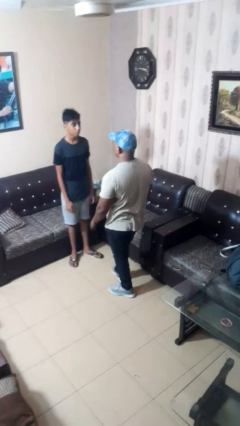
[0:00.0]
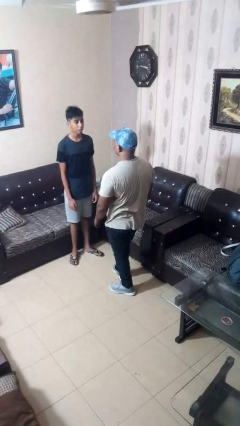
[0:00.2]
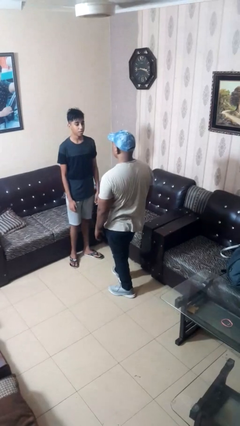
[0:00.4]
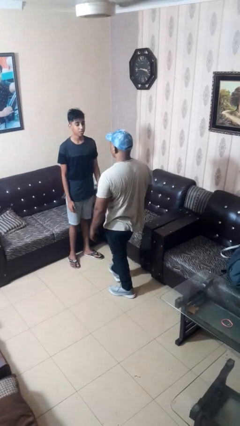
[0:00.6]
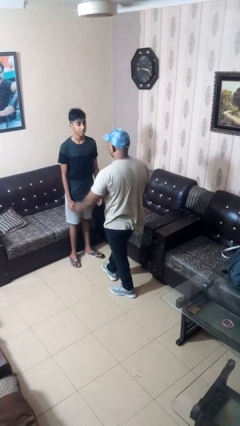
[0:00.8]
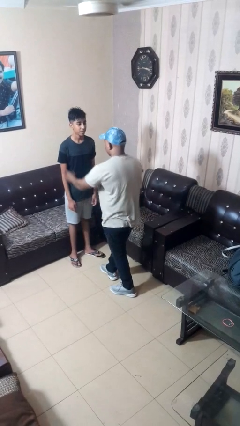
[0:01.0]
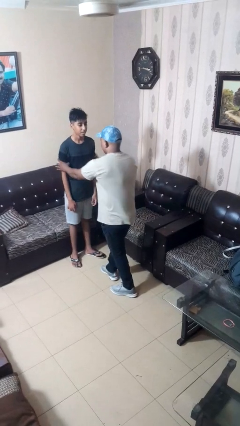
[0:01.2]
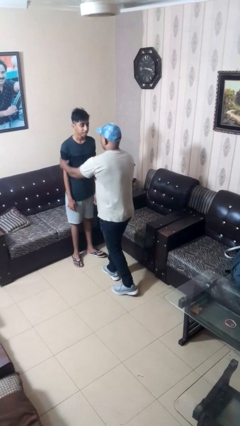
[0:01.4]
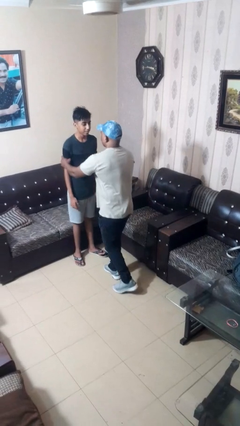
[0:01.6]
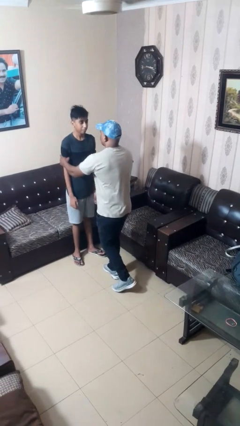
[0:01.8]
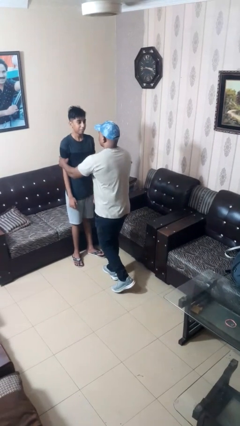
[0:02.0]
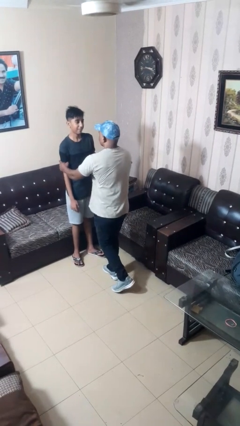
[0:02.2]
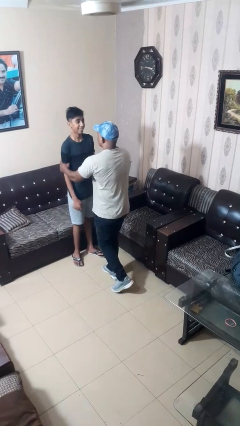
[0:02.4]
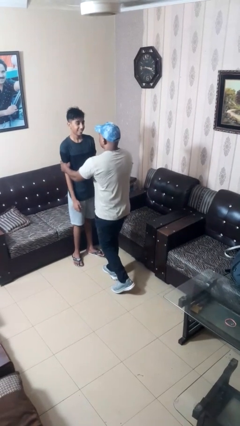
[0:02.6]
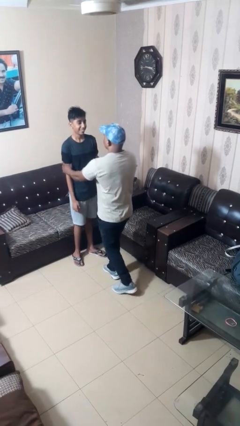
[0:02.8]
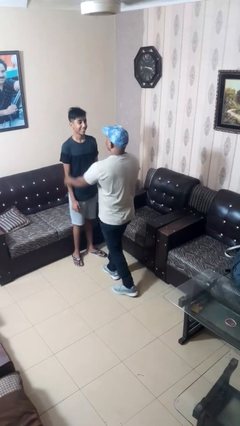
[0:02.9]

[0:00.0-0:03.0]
person grabs person by bicep

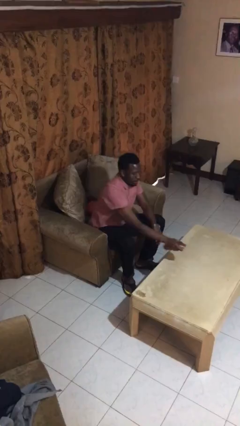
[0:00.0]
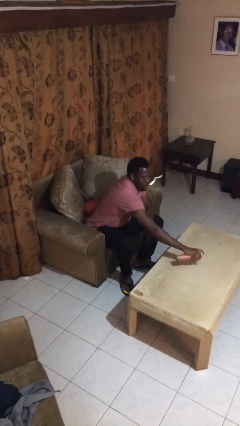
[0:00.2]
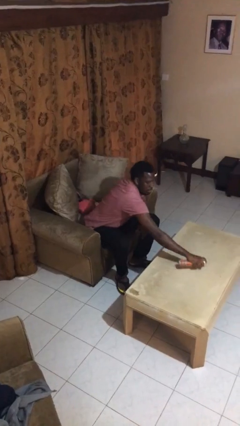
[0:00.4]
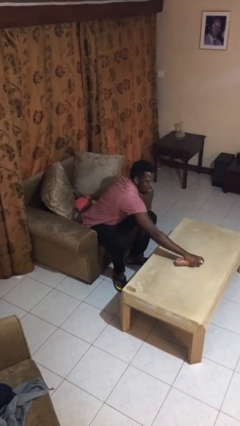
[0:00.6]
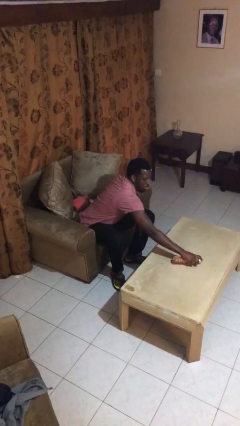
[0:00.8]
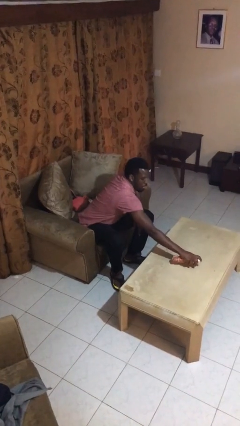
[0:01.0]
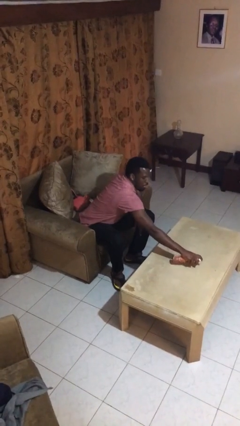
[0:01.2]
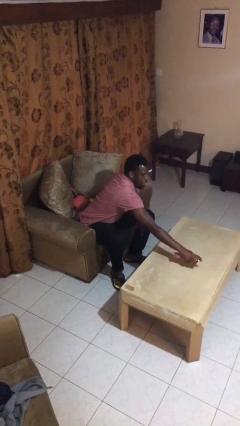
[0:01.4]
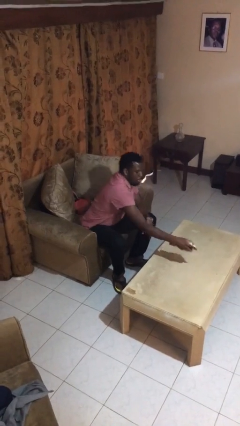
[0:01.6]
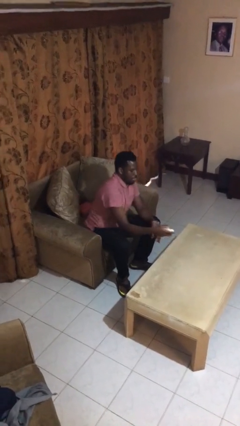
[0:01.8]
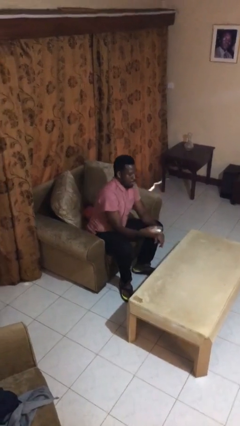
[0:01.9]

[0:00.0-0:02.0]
person sprays from bottle

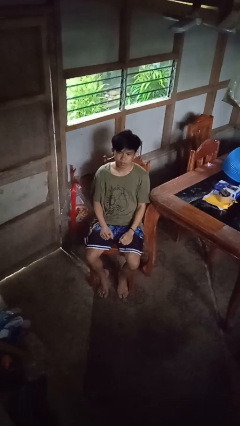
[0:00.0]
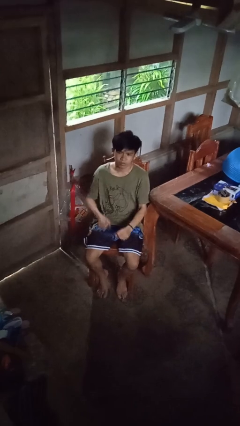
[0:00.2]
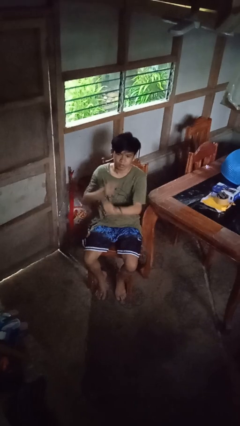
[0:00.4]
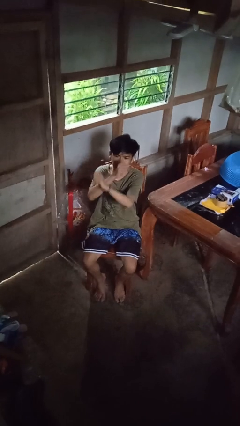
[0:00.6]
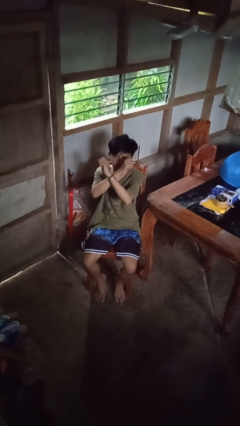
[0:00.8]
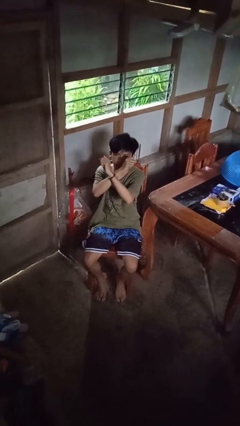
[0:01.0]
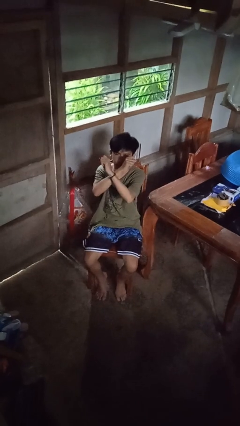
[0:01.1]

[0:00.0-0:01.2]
person gestures arms x

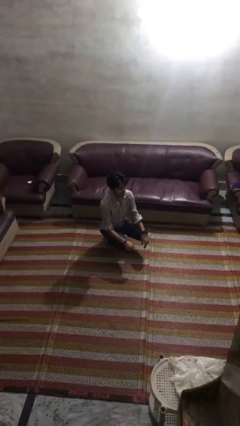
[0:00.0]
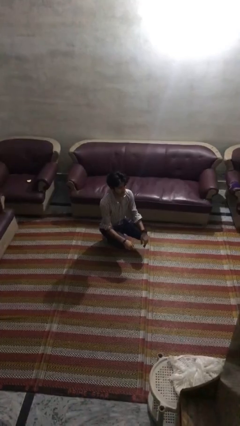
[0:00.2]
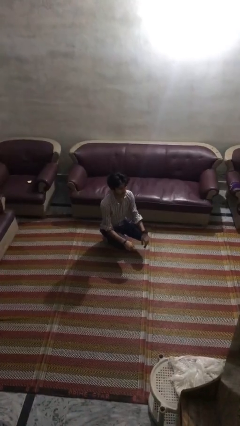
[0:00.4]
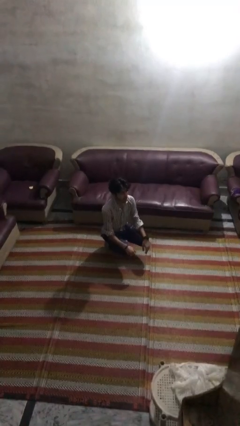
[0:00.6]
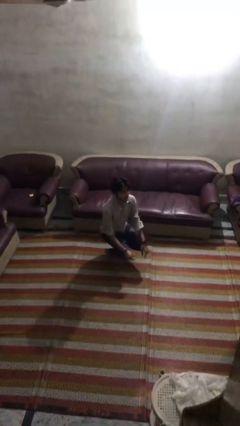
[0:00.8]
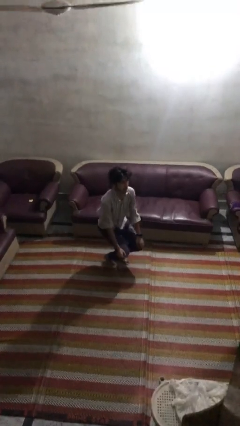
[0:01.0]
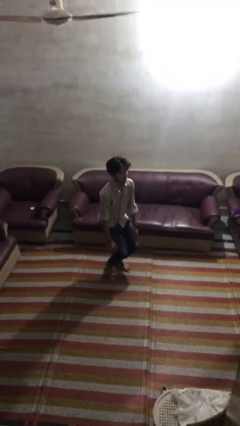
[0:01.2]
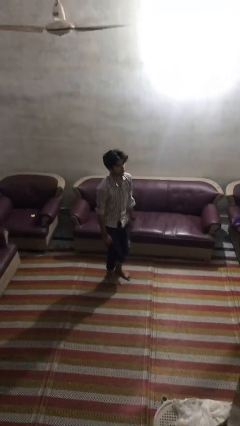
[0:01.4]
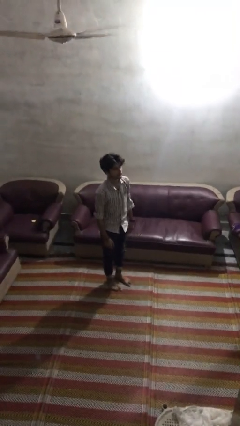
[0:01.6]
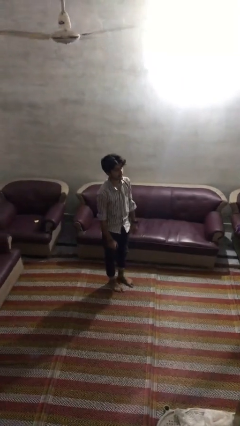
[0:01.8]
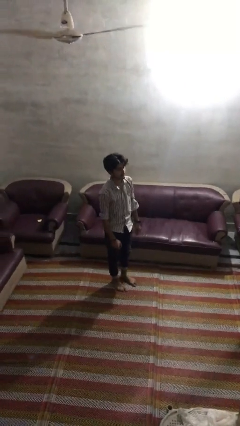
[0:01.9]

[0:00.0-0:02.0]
person stands up

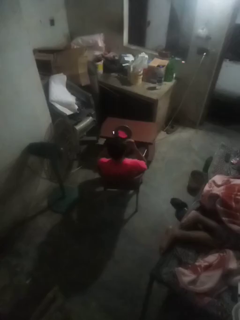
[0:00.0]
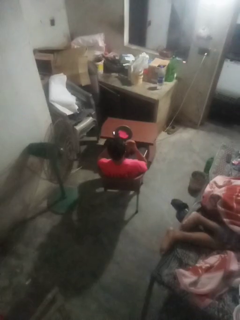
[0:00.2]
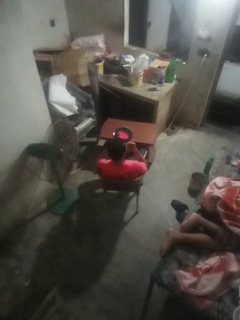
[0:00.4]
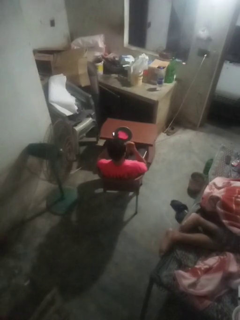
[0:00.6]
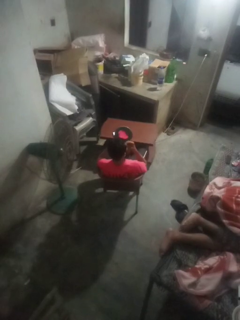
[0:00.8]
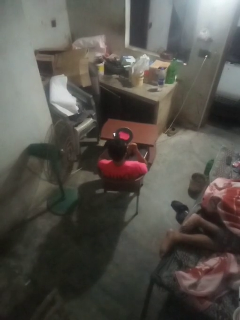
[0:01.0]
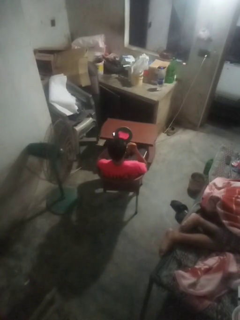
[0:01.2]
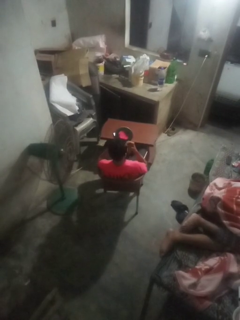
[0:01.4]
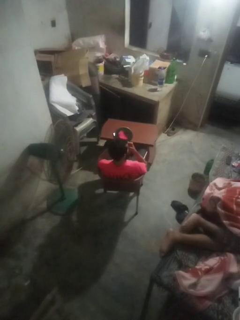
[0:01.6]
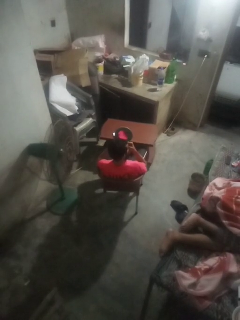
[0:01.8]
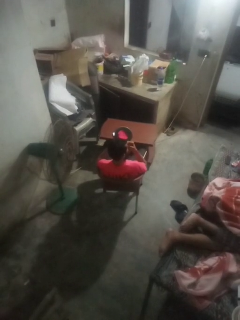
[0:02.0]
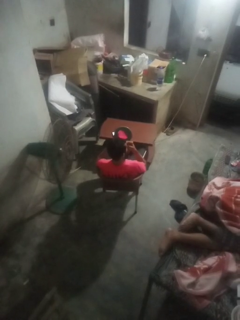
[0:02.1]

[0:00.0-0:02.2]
person applies lip makeup

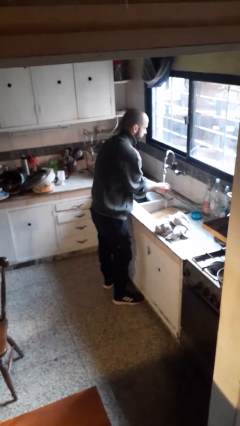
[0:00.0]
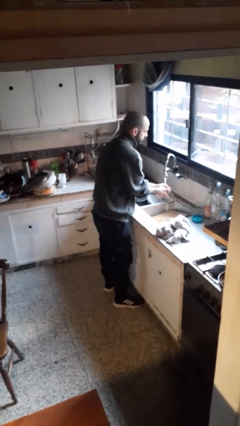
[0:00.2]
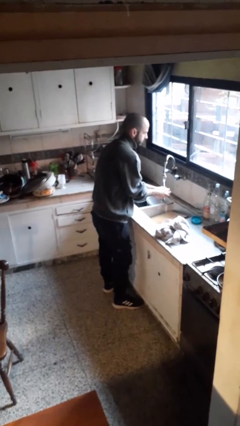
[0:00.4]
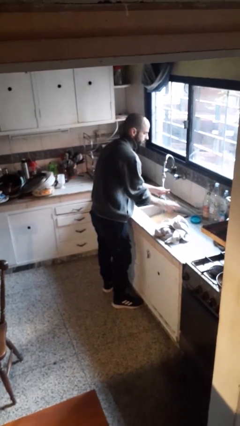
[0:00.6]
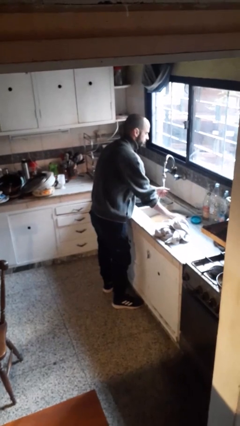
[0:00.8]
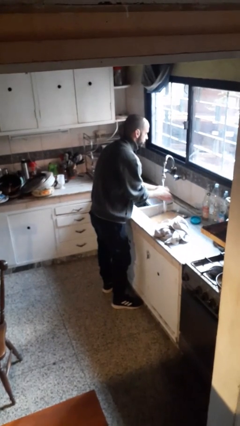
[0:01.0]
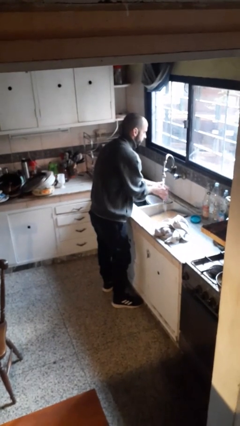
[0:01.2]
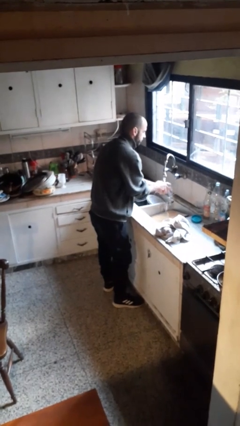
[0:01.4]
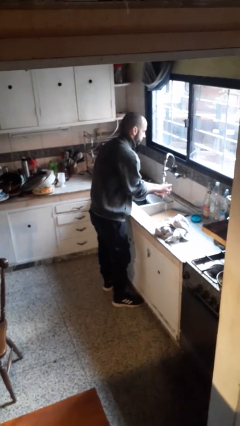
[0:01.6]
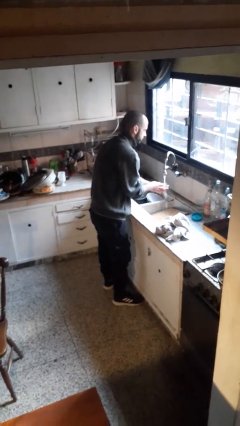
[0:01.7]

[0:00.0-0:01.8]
person washes hands

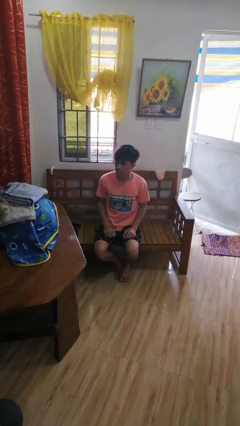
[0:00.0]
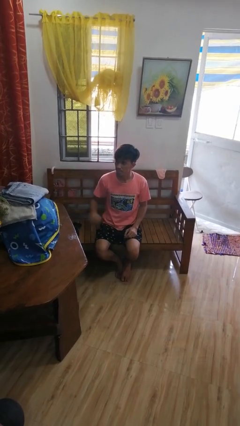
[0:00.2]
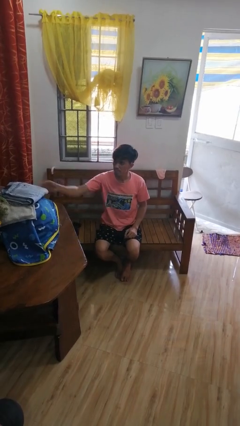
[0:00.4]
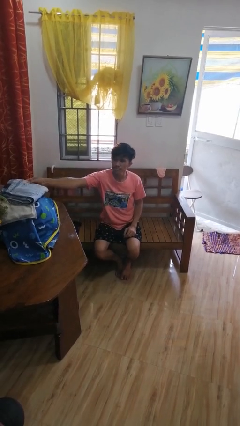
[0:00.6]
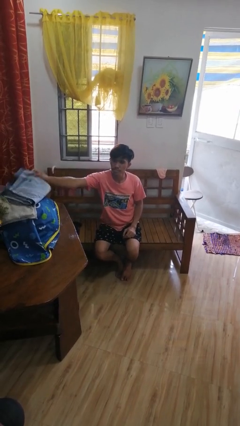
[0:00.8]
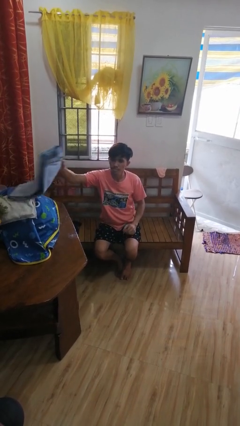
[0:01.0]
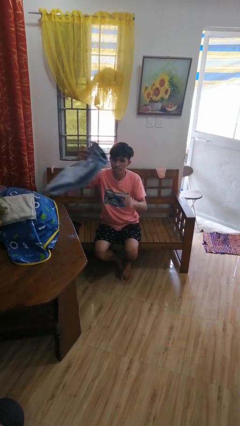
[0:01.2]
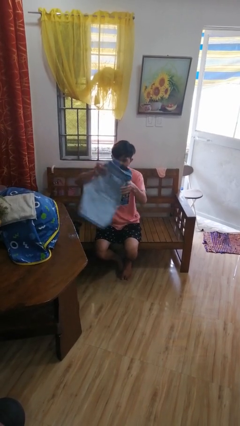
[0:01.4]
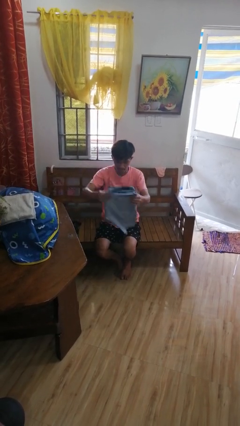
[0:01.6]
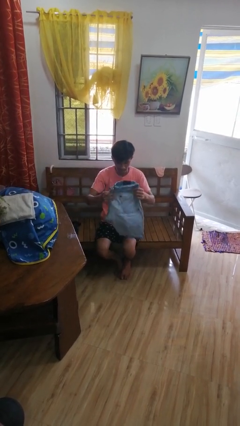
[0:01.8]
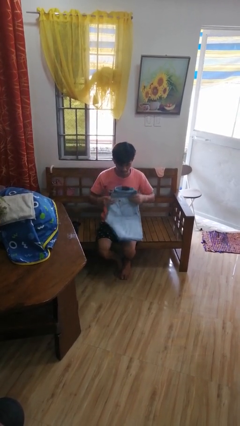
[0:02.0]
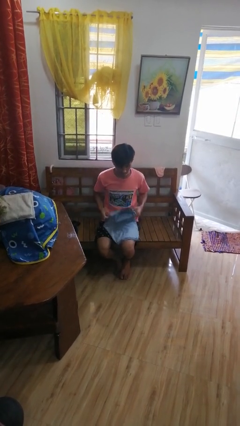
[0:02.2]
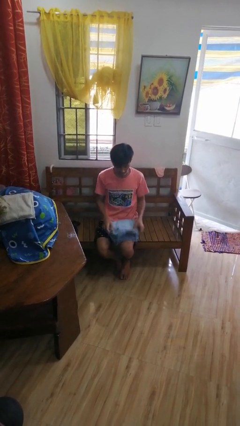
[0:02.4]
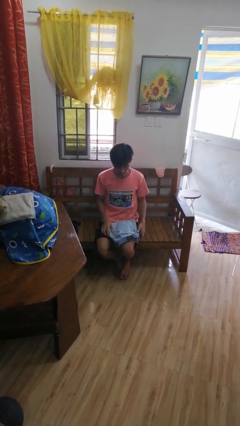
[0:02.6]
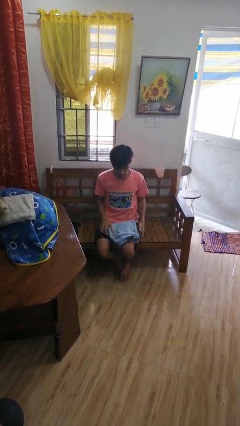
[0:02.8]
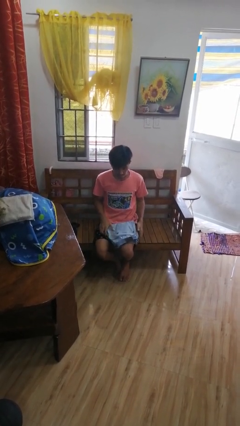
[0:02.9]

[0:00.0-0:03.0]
person folds pants

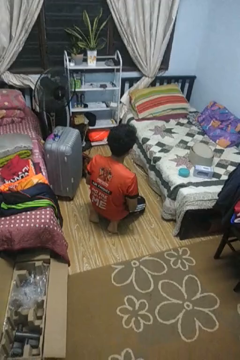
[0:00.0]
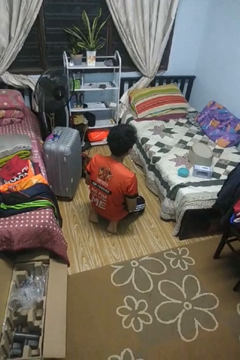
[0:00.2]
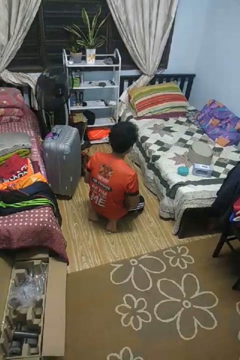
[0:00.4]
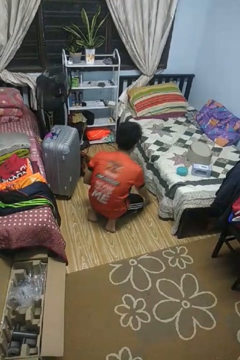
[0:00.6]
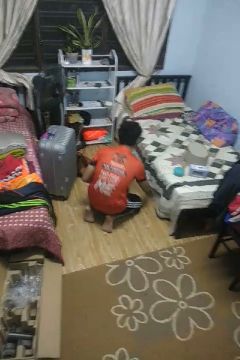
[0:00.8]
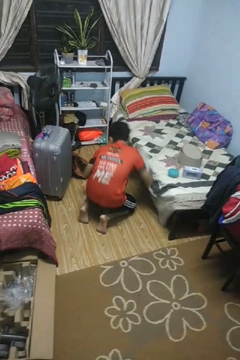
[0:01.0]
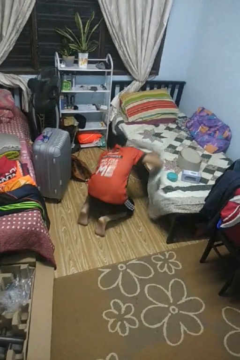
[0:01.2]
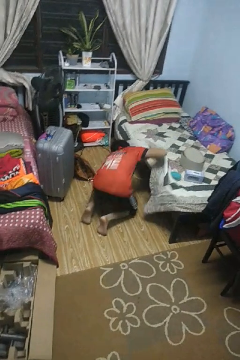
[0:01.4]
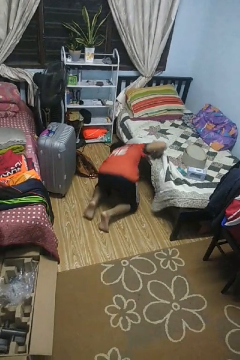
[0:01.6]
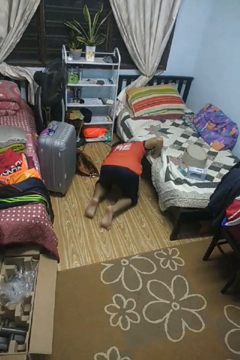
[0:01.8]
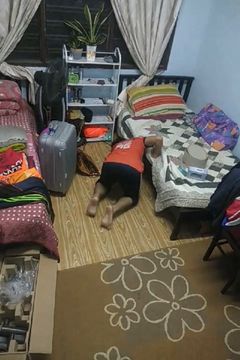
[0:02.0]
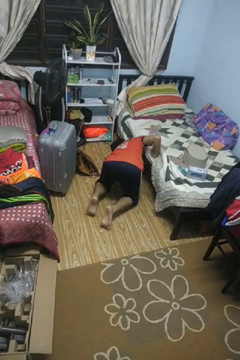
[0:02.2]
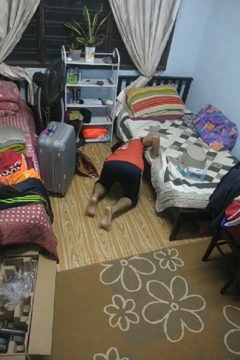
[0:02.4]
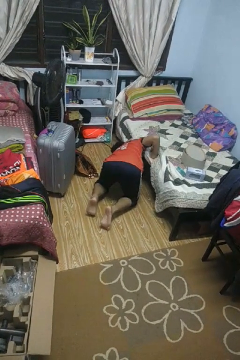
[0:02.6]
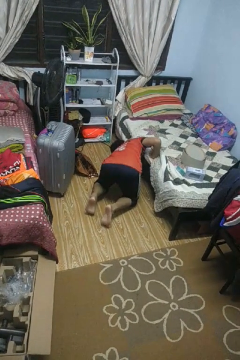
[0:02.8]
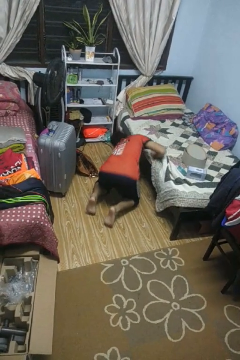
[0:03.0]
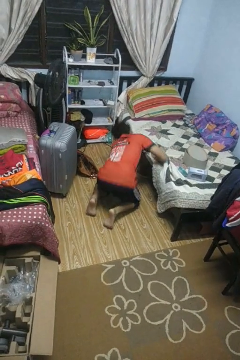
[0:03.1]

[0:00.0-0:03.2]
person searches under bed
